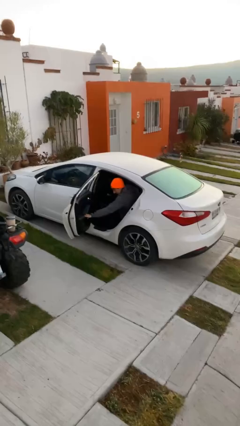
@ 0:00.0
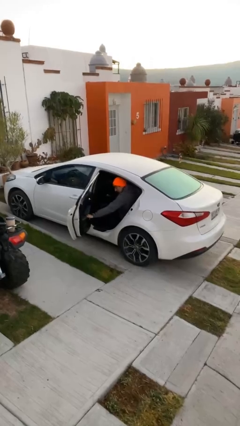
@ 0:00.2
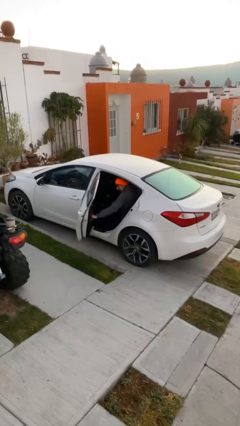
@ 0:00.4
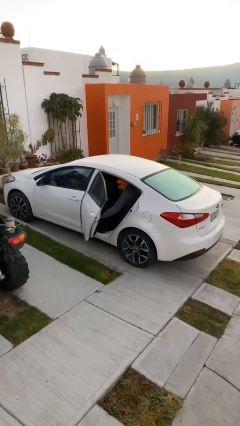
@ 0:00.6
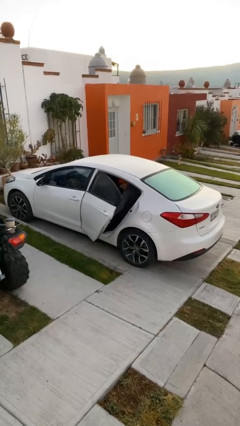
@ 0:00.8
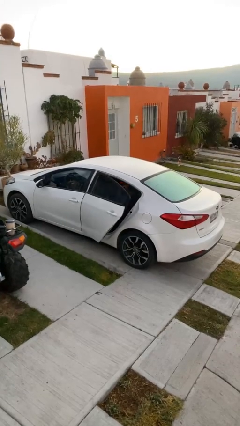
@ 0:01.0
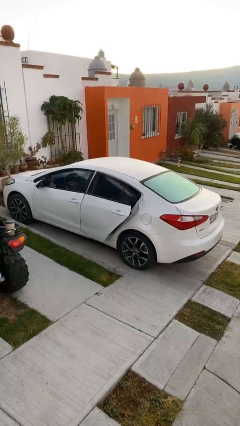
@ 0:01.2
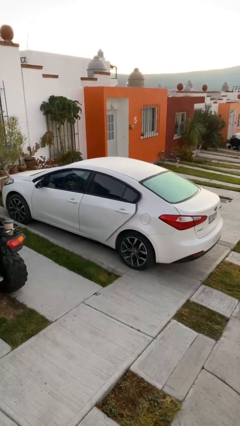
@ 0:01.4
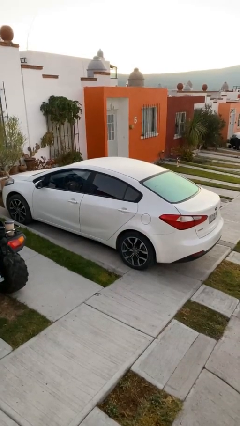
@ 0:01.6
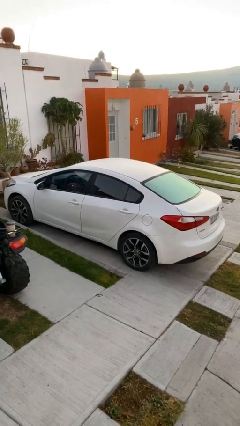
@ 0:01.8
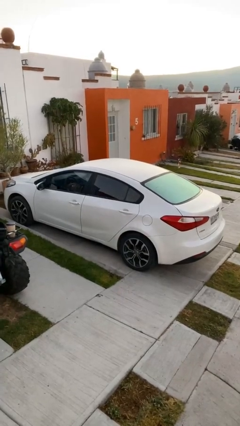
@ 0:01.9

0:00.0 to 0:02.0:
person closes car door

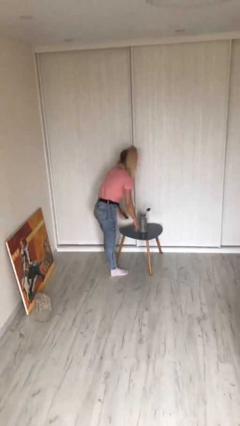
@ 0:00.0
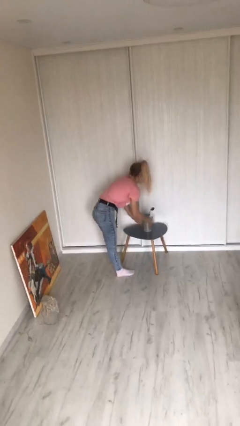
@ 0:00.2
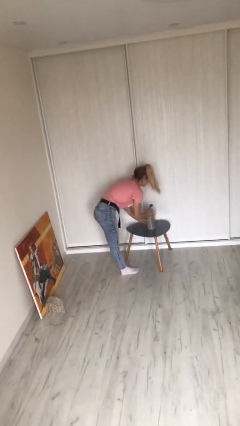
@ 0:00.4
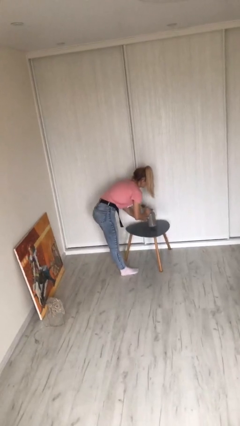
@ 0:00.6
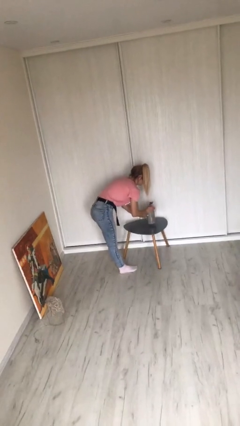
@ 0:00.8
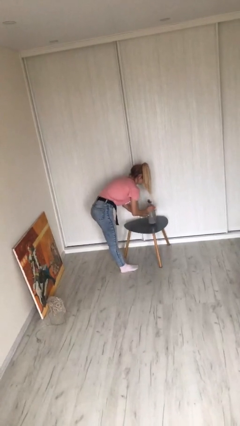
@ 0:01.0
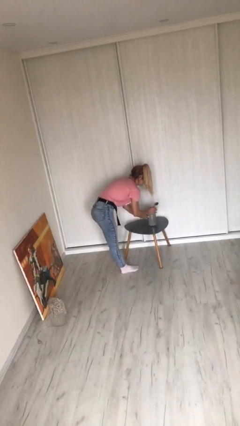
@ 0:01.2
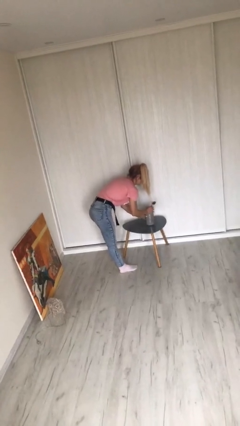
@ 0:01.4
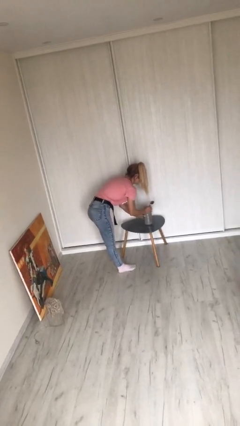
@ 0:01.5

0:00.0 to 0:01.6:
person arranges flowers in vase

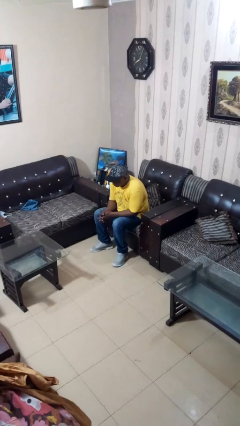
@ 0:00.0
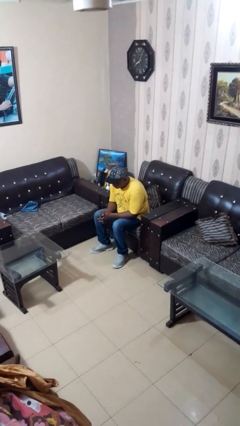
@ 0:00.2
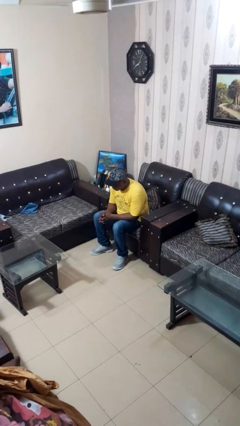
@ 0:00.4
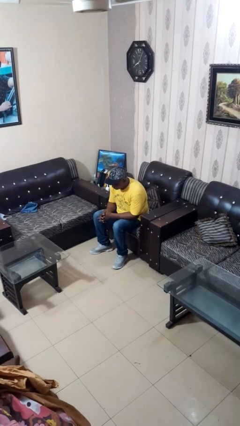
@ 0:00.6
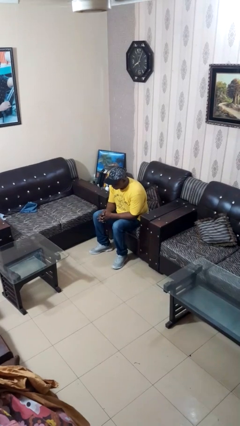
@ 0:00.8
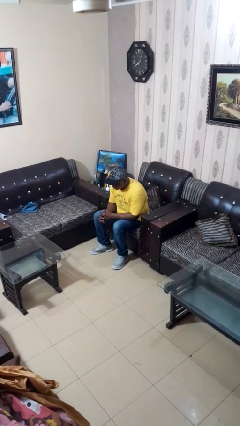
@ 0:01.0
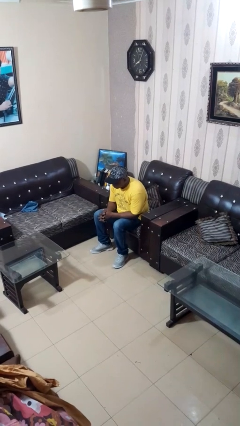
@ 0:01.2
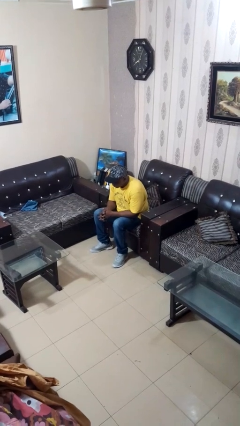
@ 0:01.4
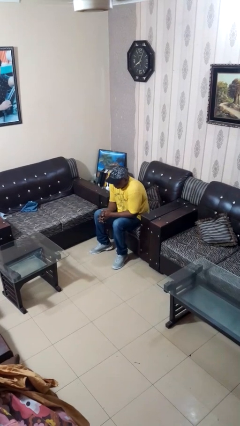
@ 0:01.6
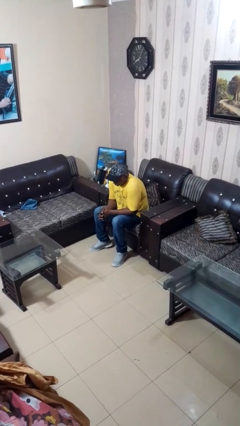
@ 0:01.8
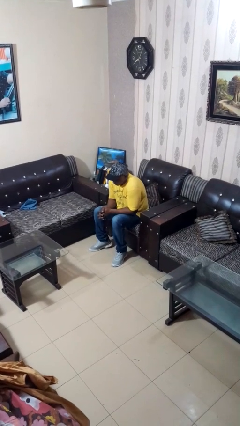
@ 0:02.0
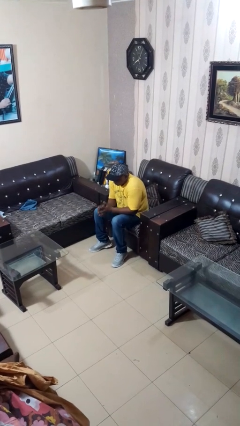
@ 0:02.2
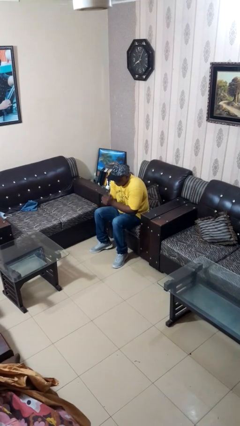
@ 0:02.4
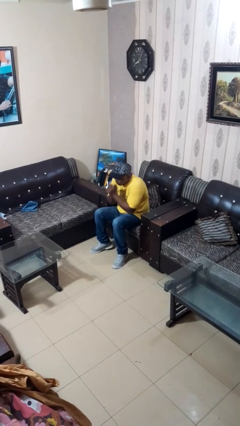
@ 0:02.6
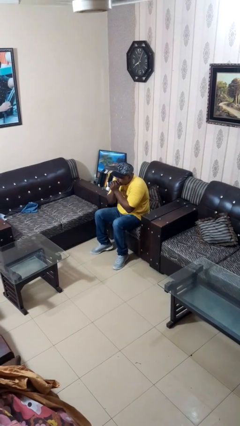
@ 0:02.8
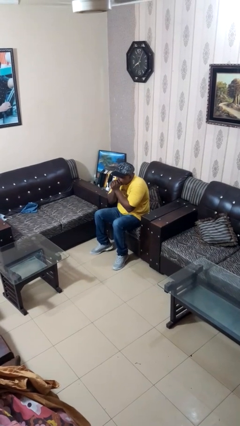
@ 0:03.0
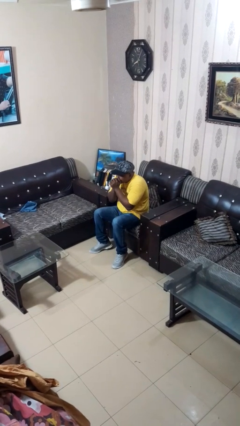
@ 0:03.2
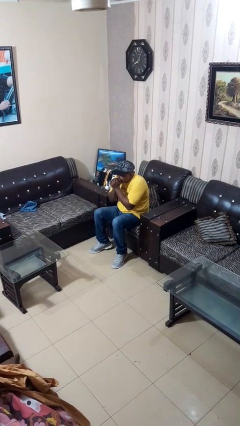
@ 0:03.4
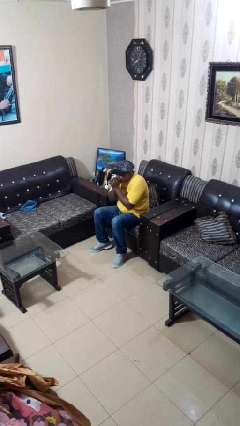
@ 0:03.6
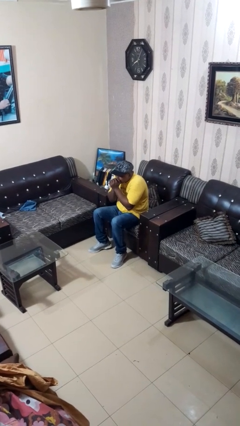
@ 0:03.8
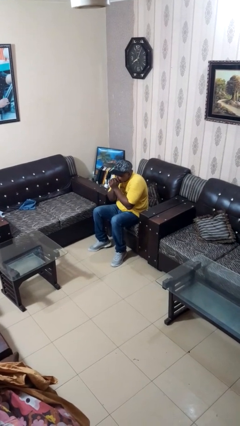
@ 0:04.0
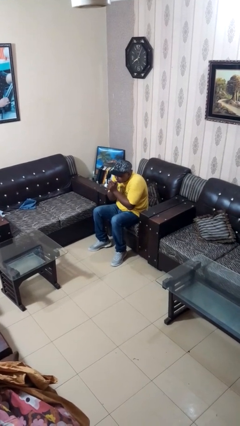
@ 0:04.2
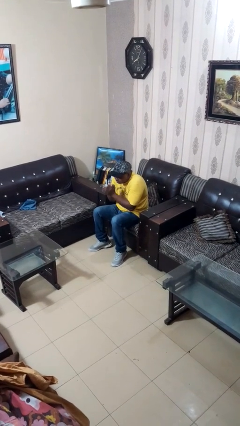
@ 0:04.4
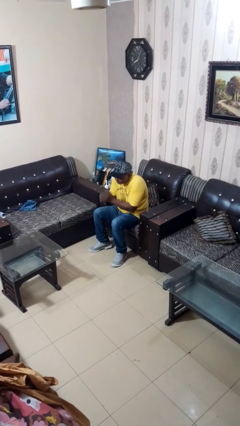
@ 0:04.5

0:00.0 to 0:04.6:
person blows into hands

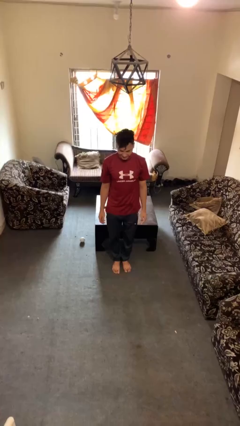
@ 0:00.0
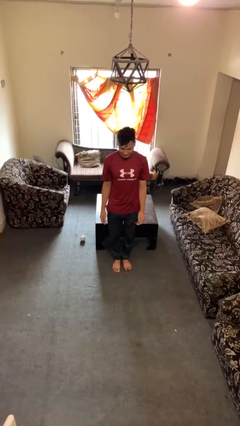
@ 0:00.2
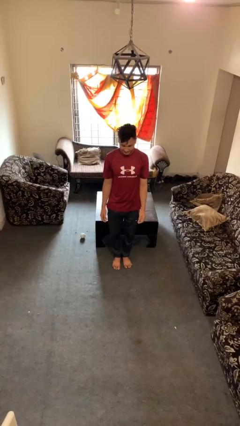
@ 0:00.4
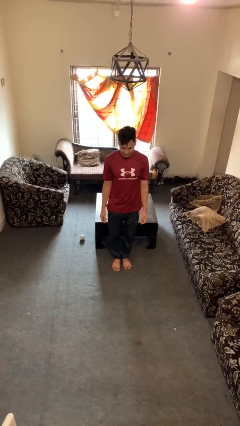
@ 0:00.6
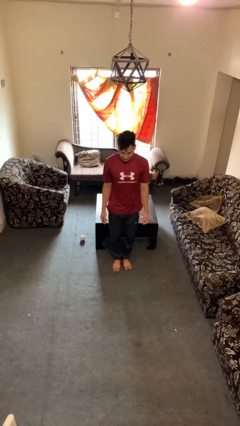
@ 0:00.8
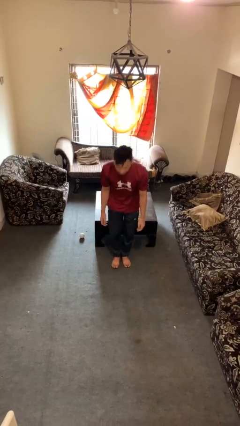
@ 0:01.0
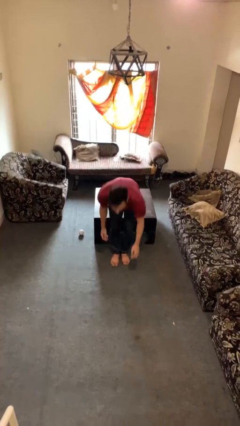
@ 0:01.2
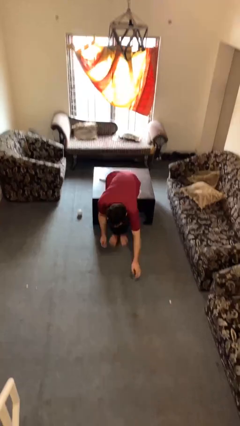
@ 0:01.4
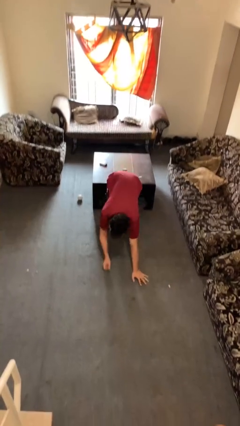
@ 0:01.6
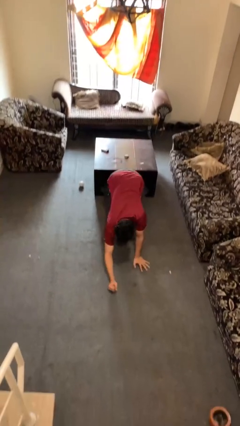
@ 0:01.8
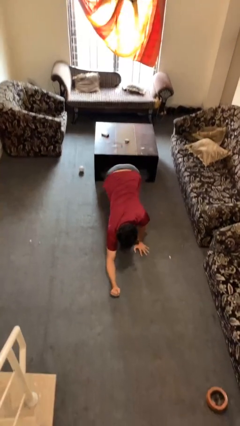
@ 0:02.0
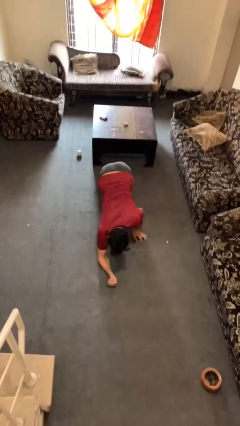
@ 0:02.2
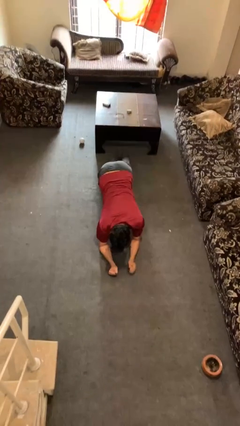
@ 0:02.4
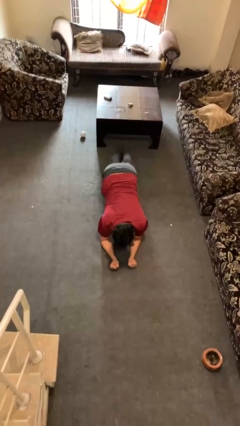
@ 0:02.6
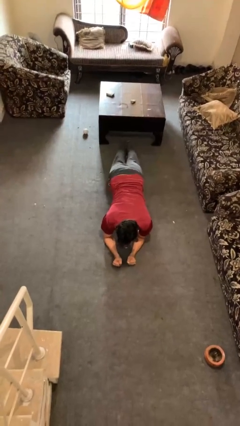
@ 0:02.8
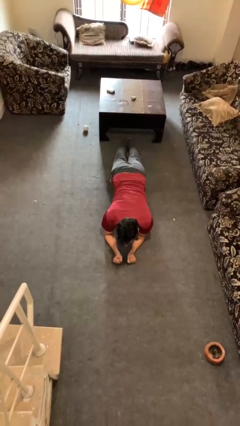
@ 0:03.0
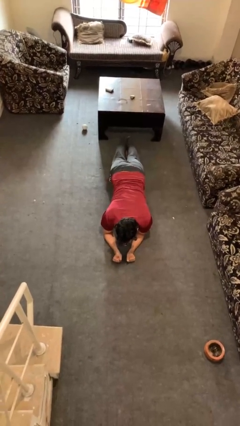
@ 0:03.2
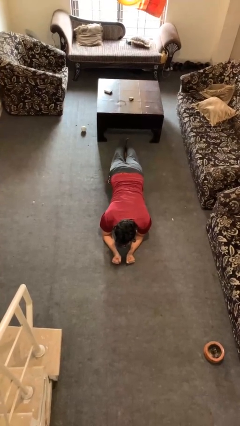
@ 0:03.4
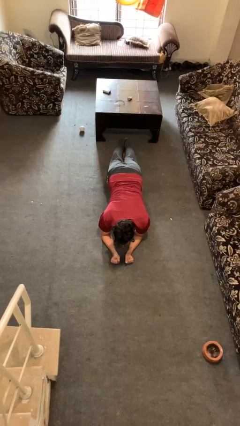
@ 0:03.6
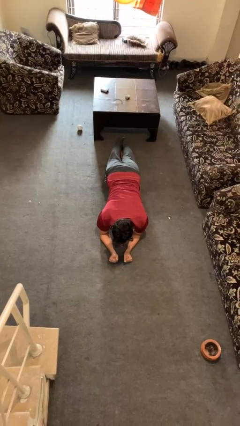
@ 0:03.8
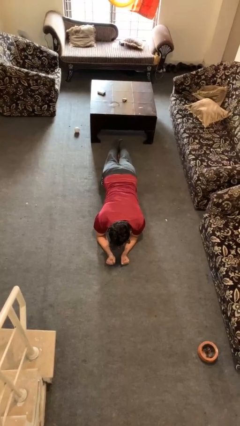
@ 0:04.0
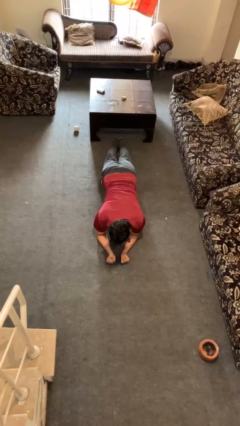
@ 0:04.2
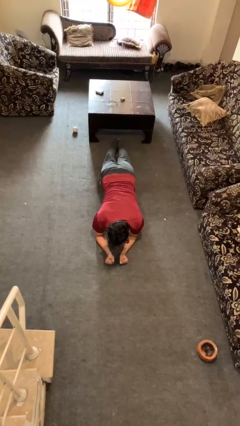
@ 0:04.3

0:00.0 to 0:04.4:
person exercises with plank

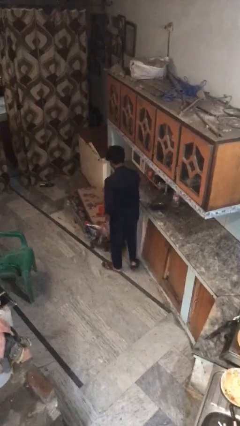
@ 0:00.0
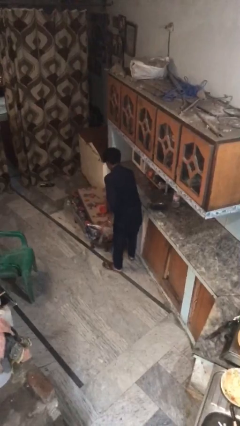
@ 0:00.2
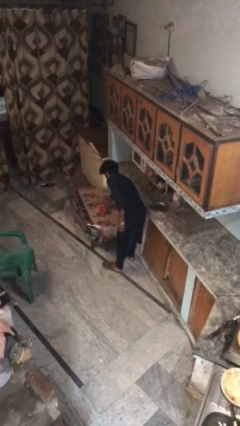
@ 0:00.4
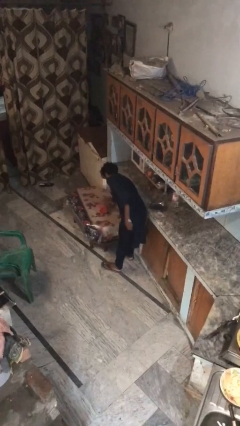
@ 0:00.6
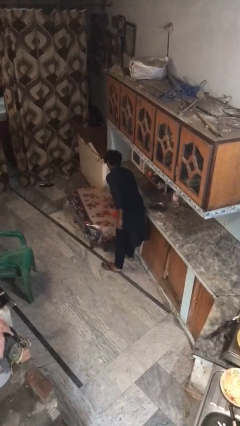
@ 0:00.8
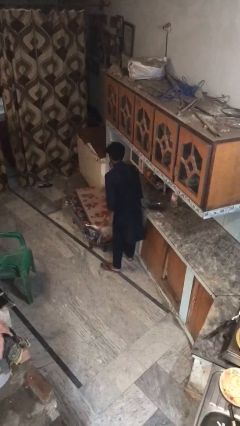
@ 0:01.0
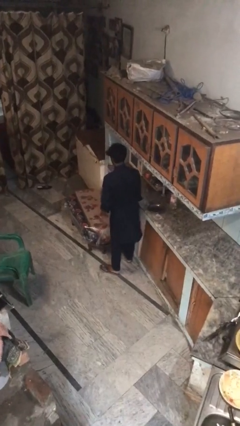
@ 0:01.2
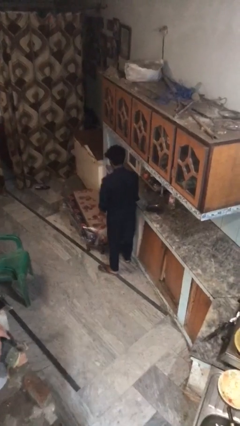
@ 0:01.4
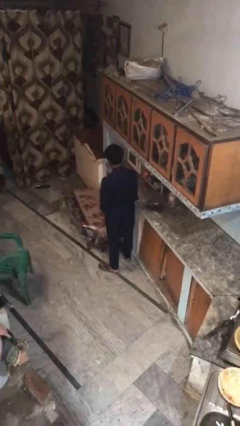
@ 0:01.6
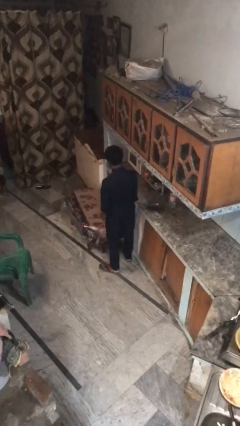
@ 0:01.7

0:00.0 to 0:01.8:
person picks up object from table

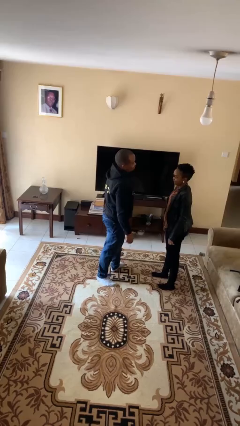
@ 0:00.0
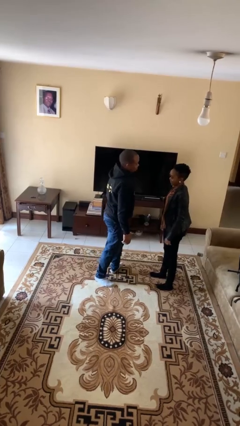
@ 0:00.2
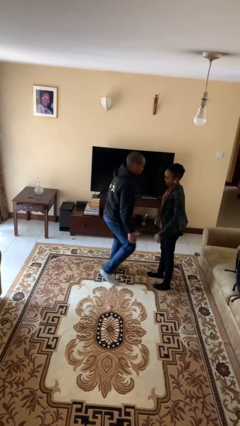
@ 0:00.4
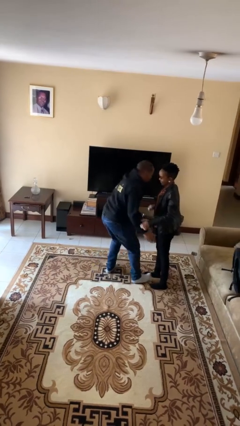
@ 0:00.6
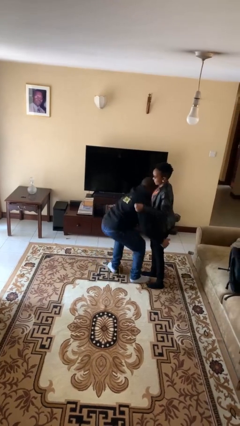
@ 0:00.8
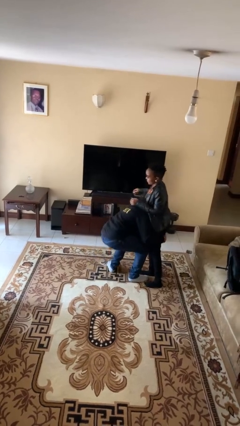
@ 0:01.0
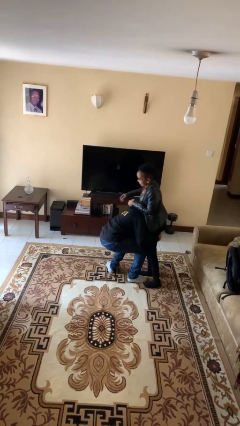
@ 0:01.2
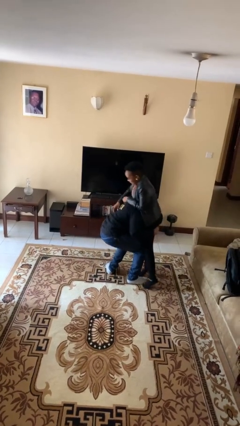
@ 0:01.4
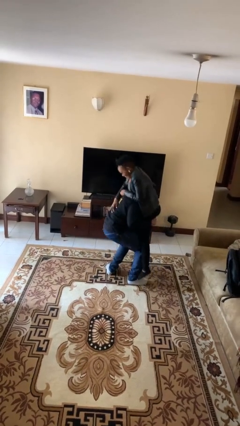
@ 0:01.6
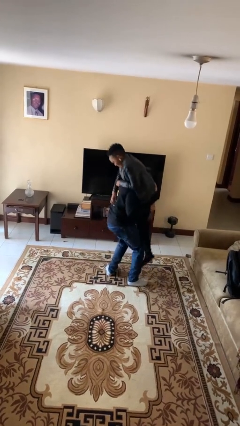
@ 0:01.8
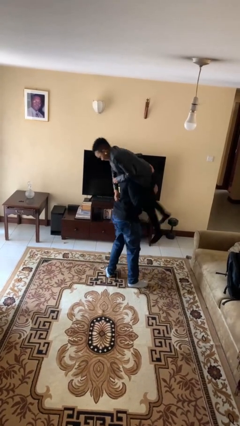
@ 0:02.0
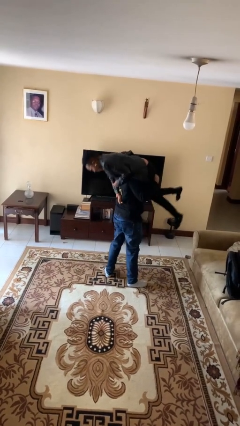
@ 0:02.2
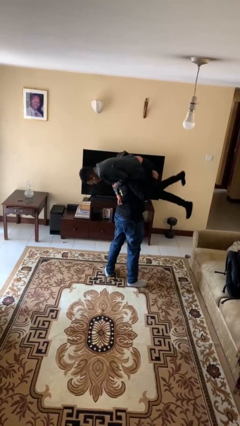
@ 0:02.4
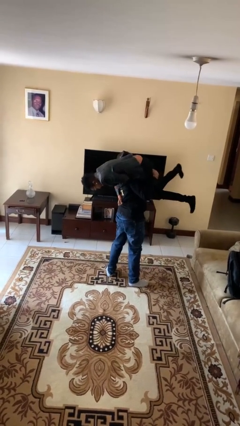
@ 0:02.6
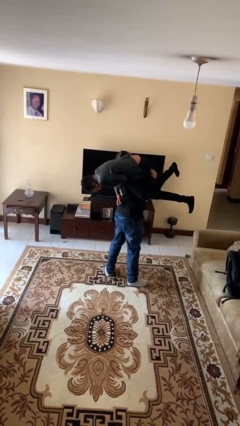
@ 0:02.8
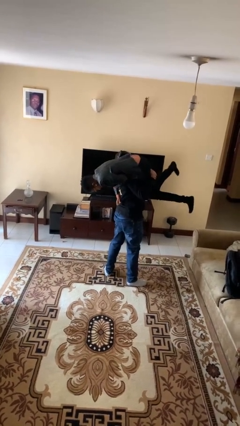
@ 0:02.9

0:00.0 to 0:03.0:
person carries person over shoulder
